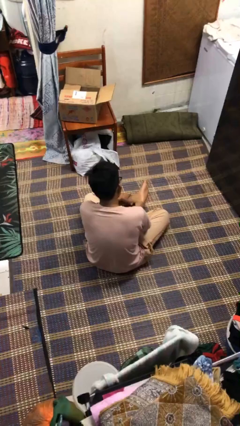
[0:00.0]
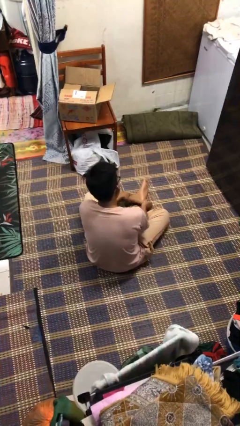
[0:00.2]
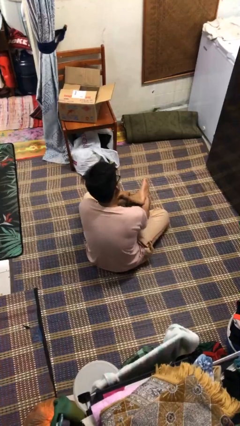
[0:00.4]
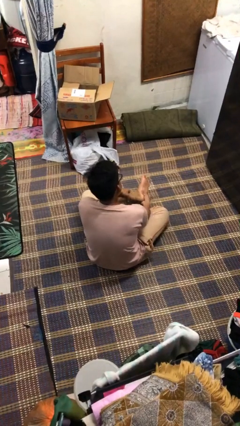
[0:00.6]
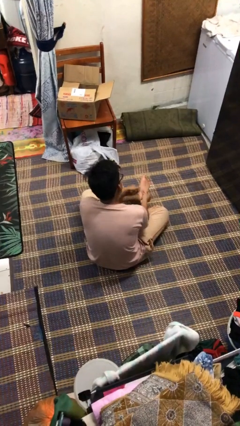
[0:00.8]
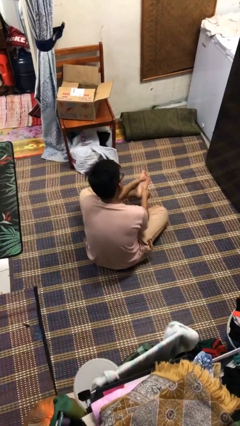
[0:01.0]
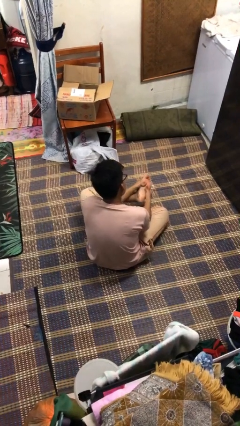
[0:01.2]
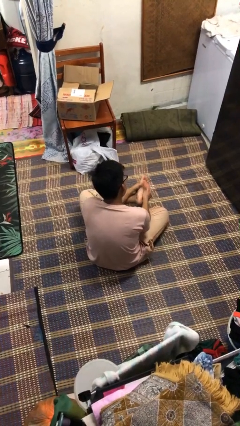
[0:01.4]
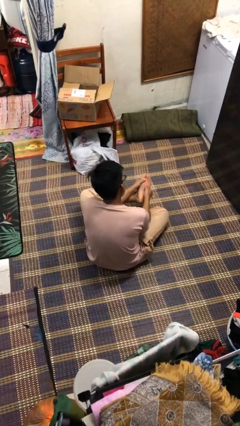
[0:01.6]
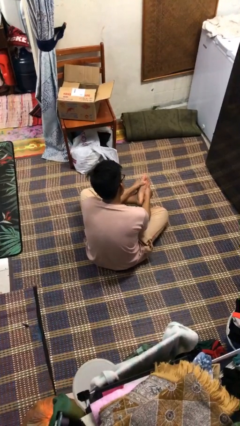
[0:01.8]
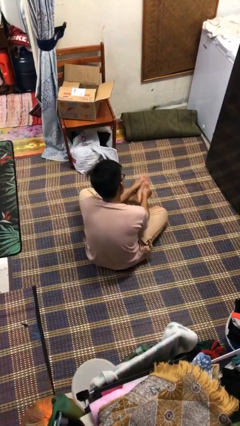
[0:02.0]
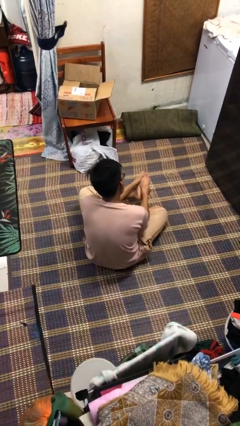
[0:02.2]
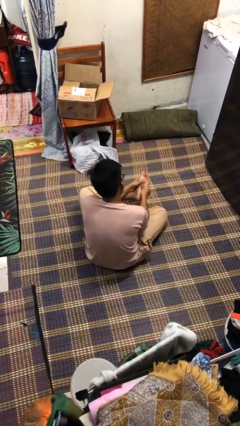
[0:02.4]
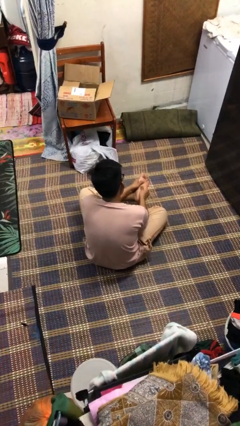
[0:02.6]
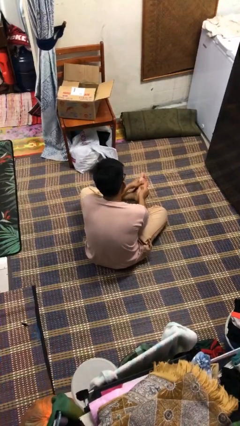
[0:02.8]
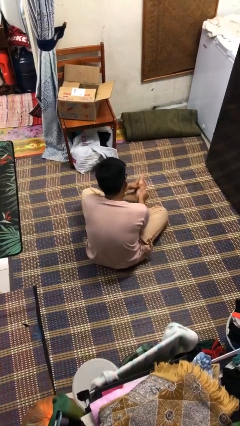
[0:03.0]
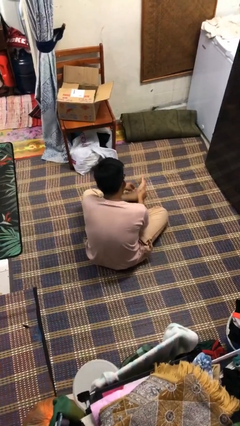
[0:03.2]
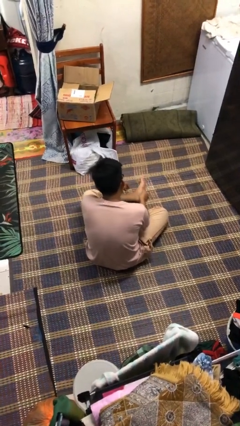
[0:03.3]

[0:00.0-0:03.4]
person rubs foot

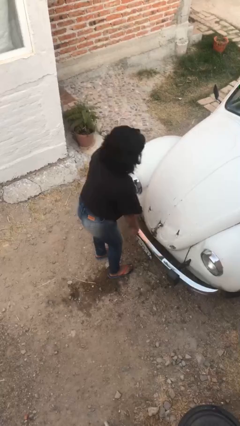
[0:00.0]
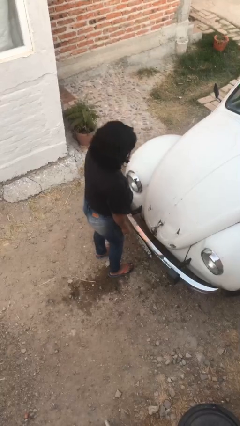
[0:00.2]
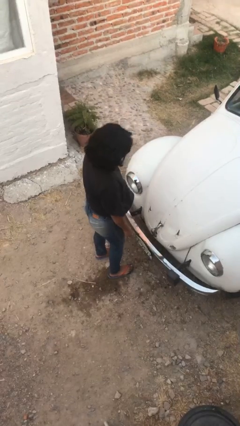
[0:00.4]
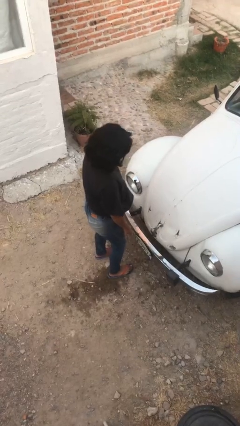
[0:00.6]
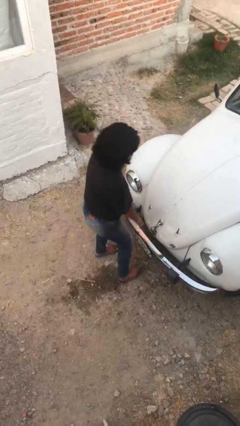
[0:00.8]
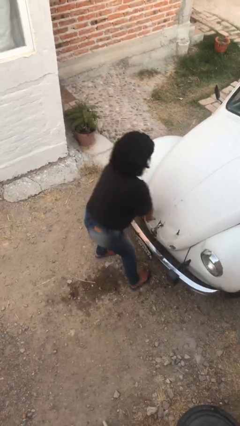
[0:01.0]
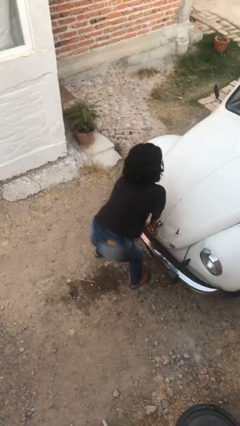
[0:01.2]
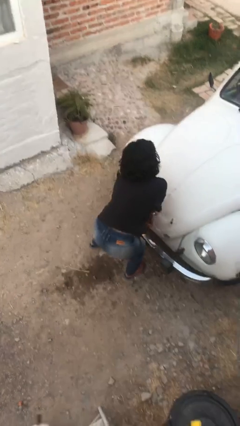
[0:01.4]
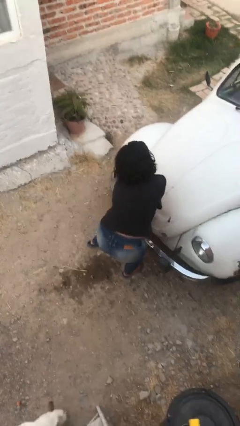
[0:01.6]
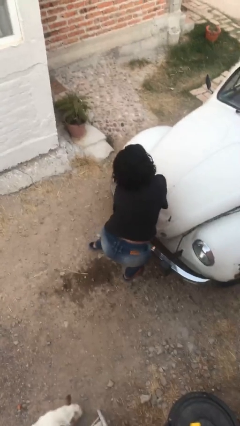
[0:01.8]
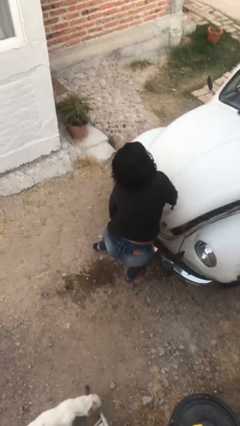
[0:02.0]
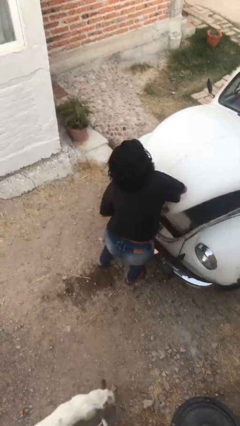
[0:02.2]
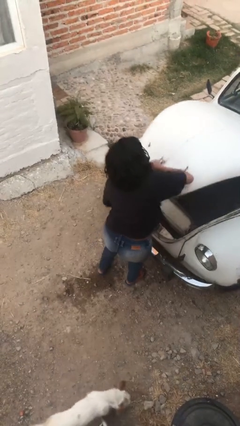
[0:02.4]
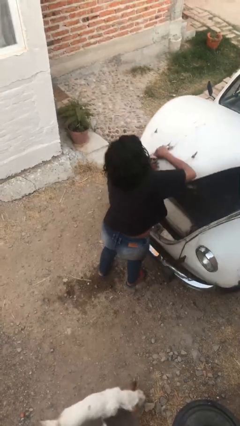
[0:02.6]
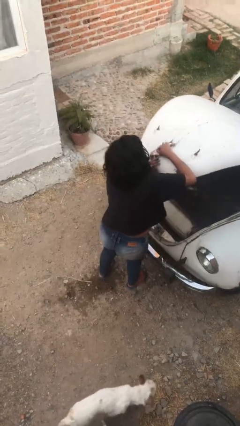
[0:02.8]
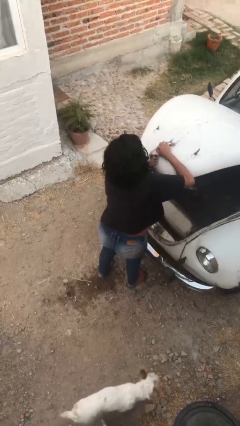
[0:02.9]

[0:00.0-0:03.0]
person opens car trunk

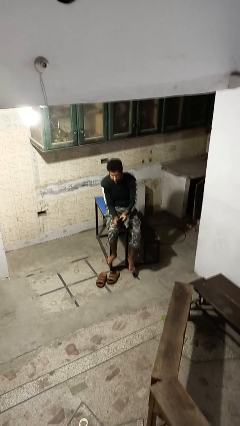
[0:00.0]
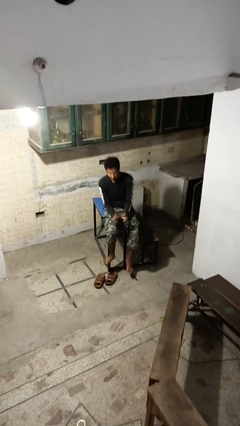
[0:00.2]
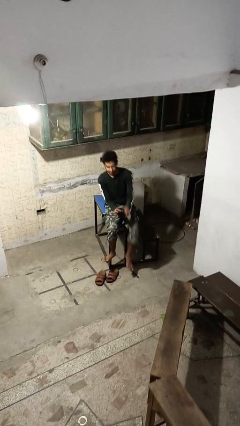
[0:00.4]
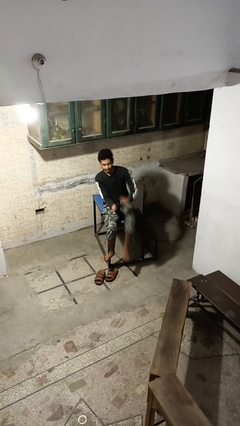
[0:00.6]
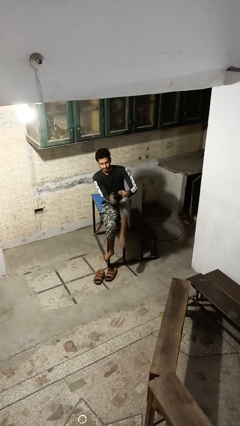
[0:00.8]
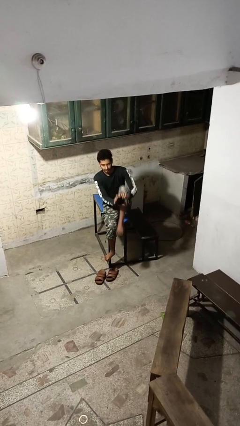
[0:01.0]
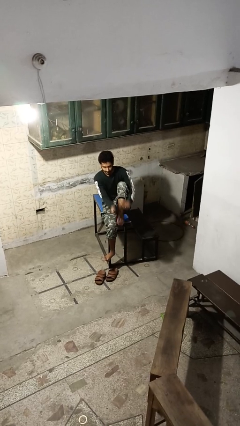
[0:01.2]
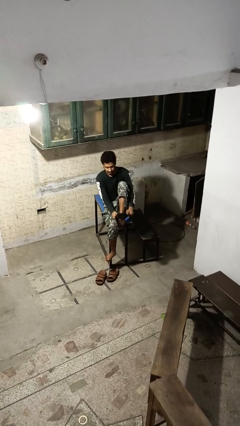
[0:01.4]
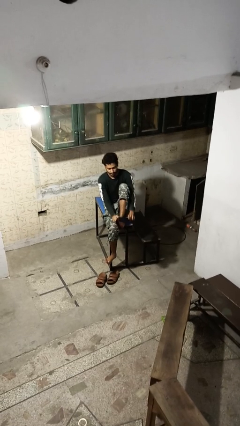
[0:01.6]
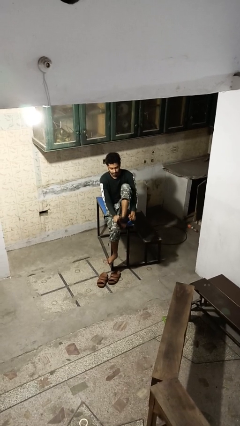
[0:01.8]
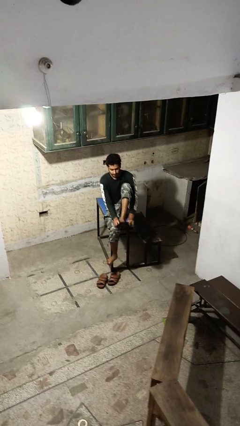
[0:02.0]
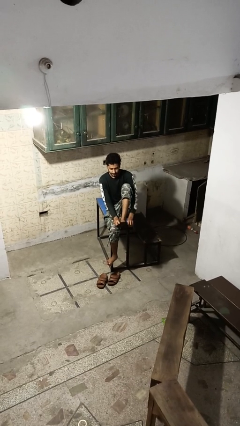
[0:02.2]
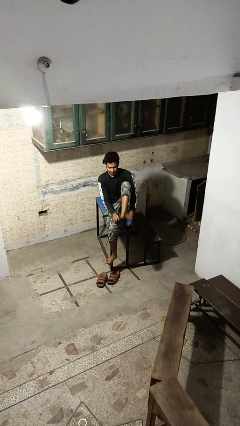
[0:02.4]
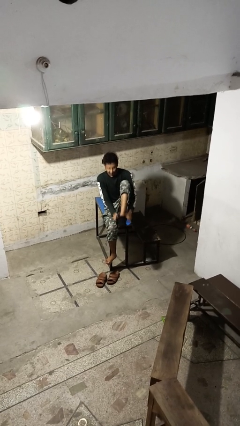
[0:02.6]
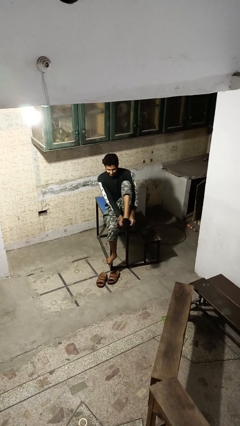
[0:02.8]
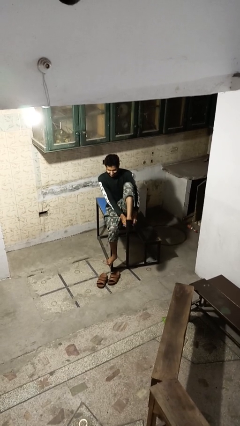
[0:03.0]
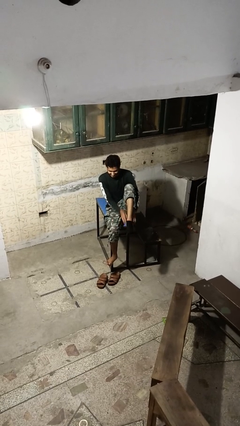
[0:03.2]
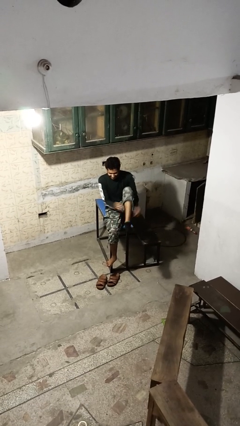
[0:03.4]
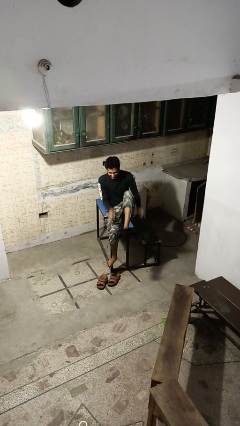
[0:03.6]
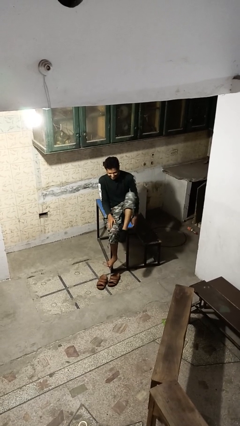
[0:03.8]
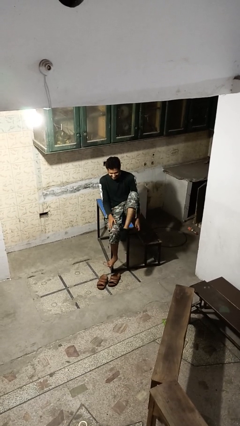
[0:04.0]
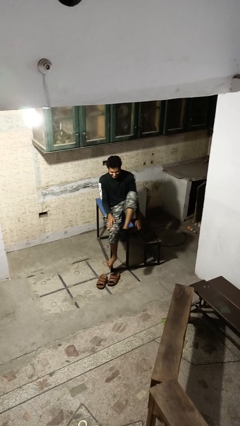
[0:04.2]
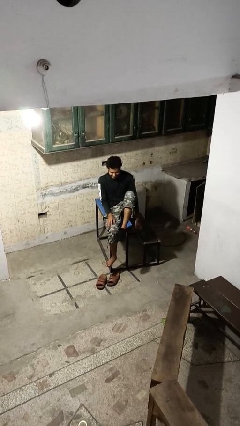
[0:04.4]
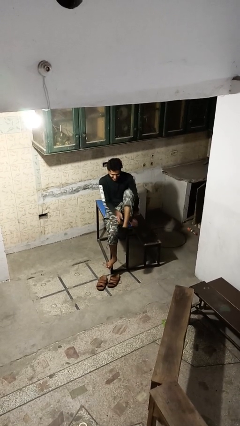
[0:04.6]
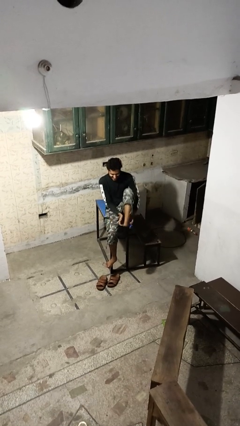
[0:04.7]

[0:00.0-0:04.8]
person puts on socks

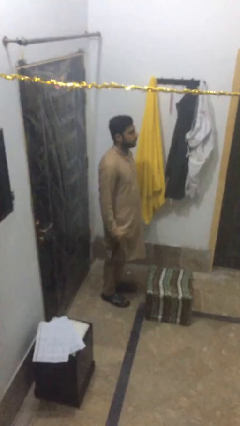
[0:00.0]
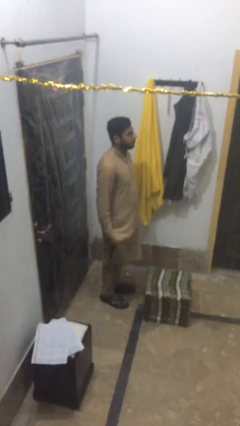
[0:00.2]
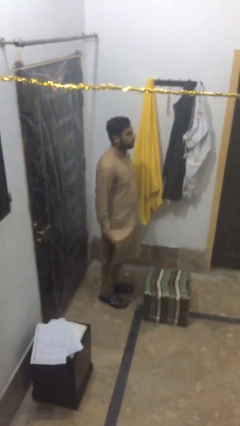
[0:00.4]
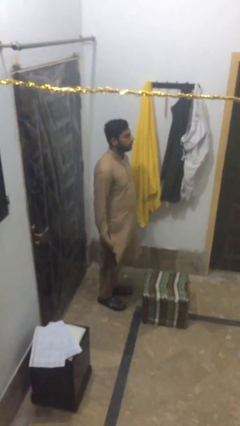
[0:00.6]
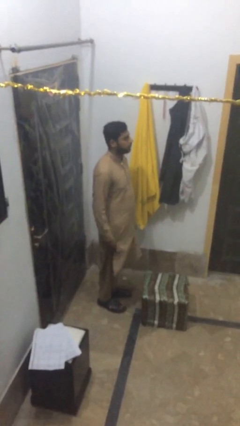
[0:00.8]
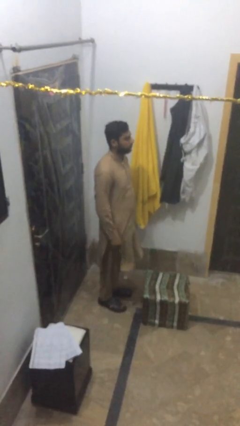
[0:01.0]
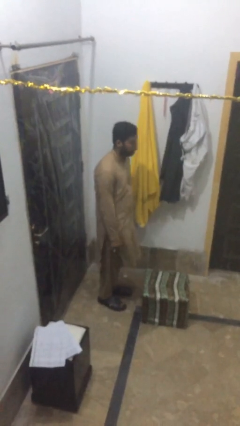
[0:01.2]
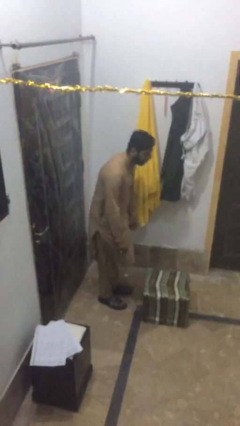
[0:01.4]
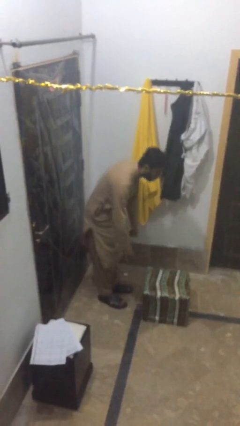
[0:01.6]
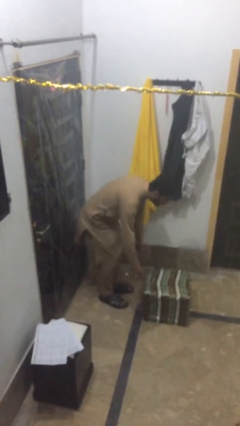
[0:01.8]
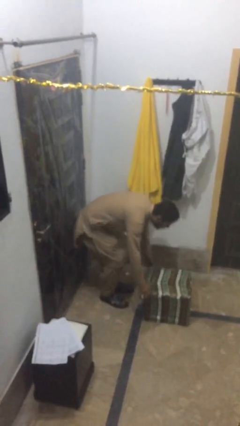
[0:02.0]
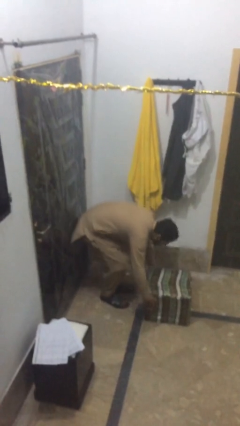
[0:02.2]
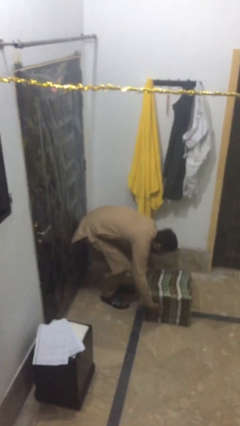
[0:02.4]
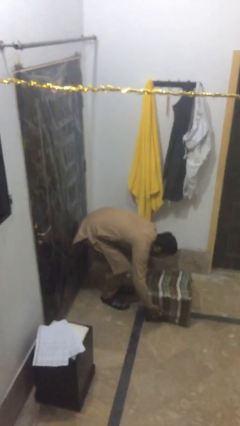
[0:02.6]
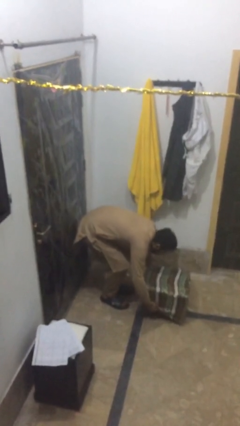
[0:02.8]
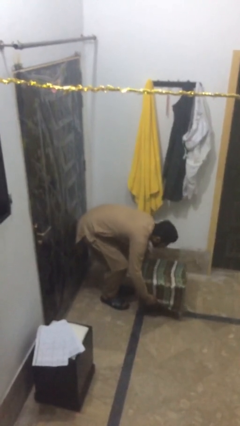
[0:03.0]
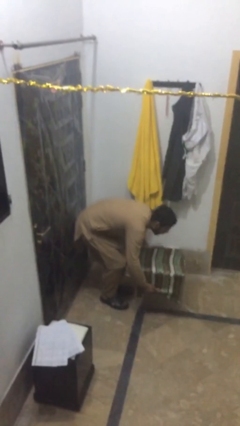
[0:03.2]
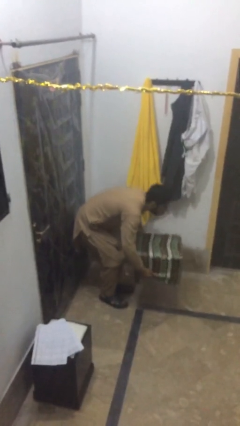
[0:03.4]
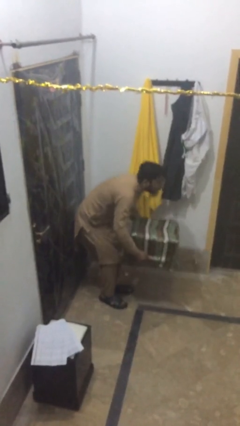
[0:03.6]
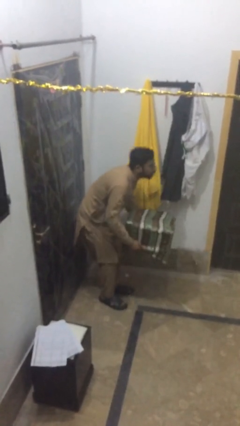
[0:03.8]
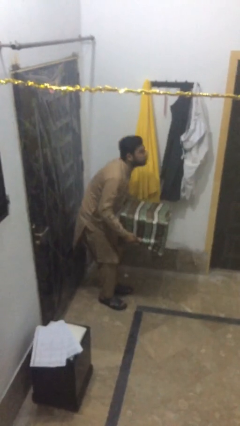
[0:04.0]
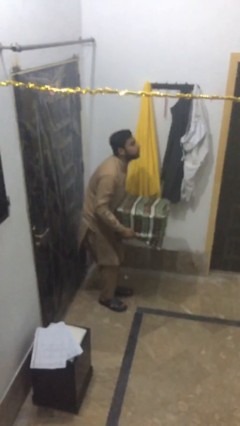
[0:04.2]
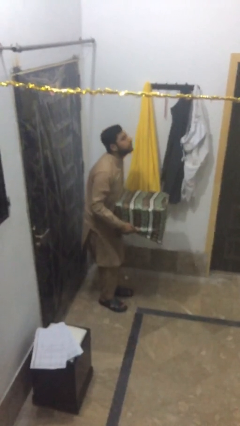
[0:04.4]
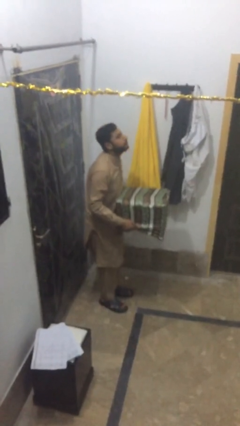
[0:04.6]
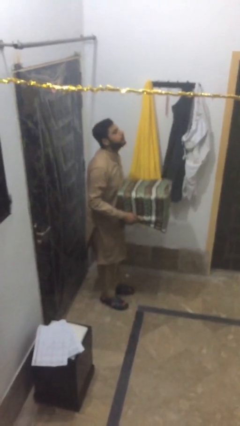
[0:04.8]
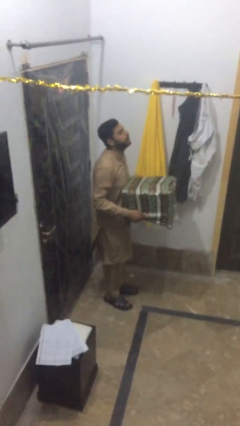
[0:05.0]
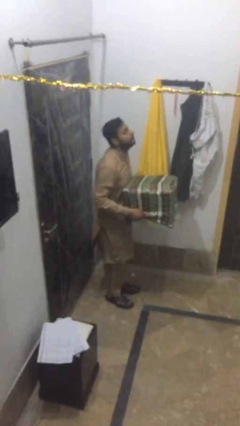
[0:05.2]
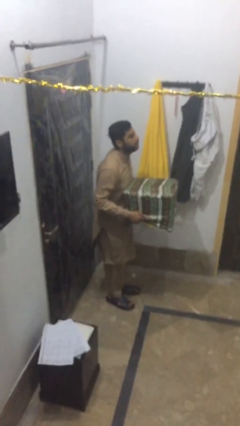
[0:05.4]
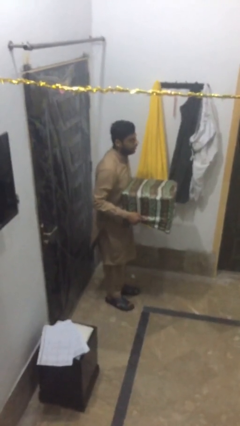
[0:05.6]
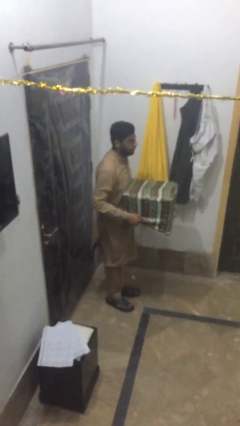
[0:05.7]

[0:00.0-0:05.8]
person picks up object from floor

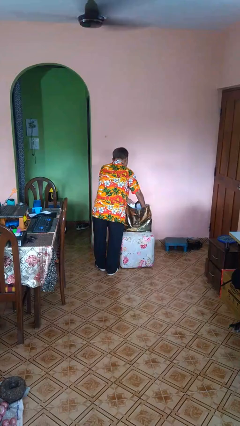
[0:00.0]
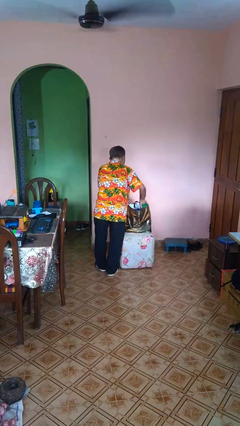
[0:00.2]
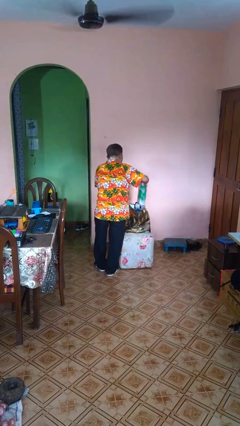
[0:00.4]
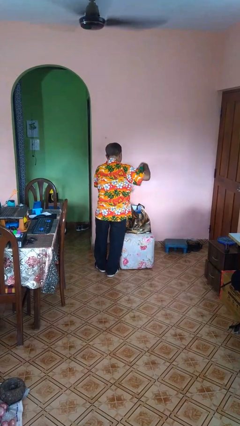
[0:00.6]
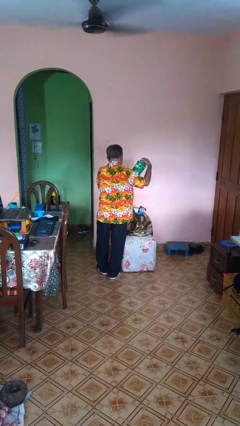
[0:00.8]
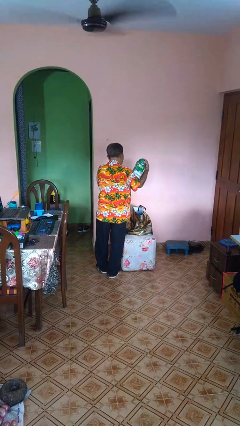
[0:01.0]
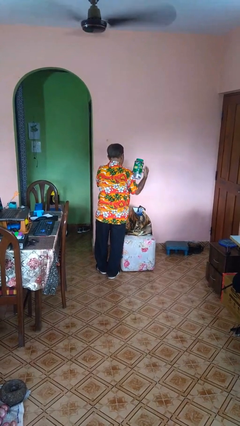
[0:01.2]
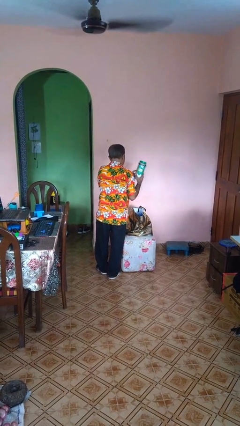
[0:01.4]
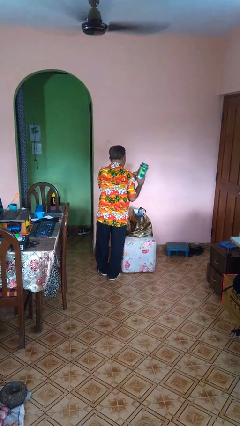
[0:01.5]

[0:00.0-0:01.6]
person takes object from bag
